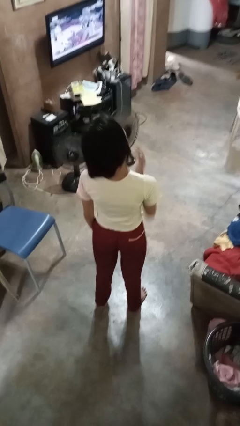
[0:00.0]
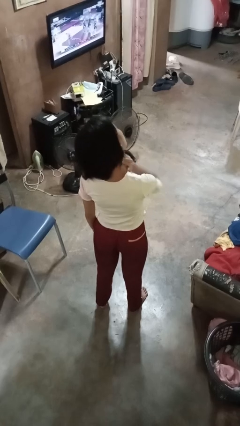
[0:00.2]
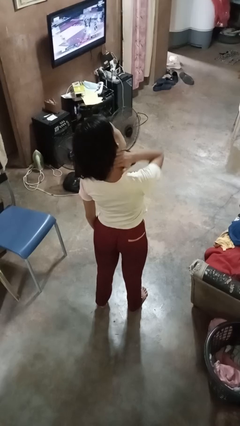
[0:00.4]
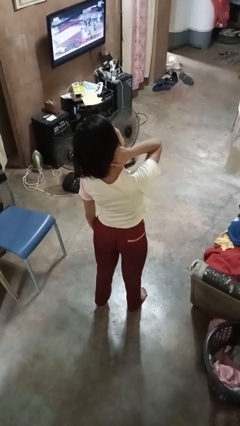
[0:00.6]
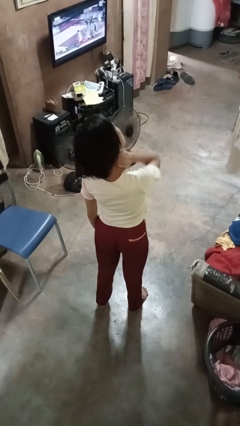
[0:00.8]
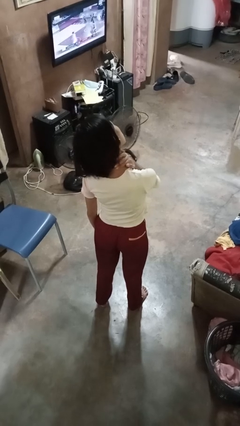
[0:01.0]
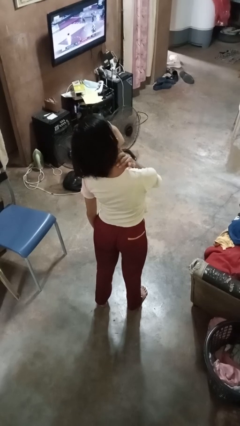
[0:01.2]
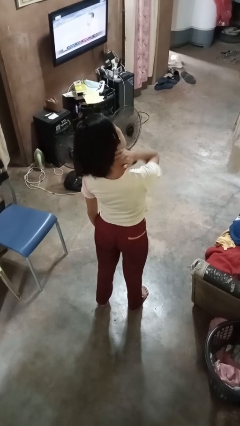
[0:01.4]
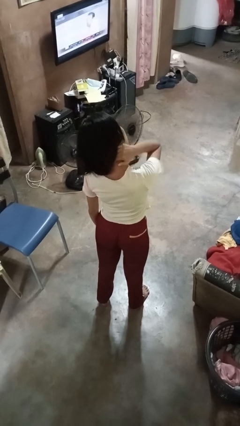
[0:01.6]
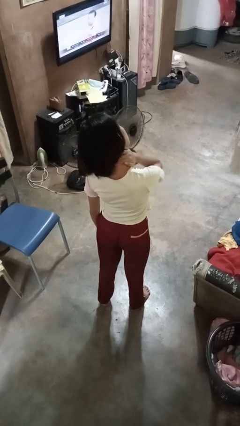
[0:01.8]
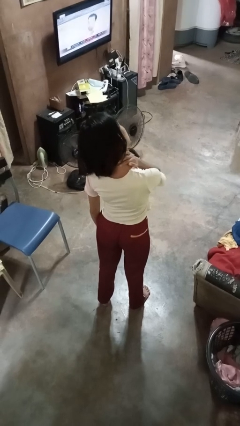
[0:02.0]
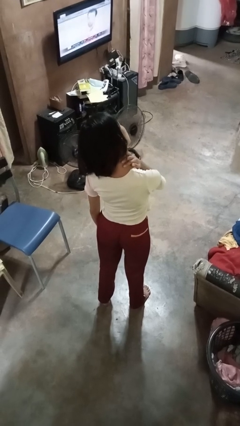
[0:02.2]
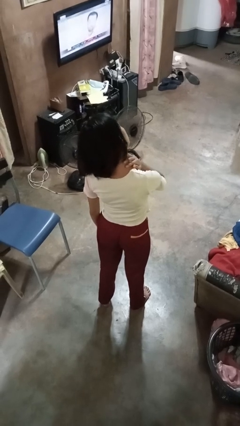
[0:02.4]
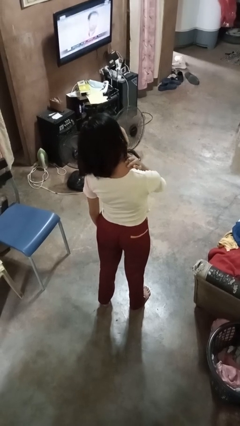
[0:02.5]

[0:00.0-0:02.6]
person rubs neck

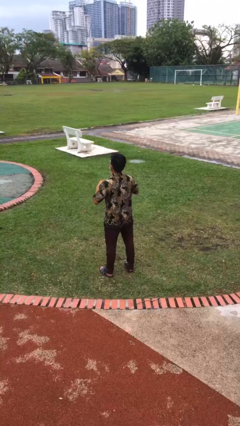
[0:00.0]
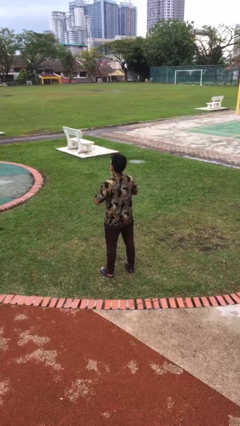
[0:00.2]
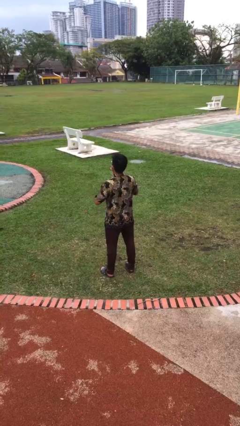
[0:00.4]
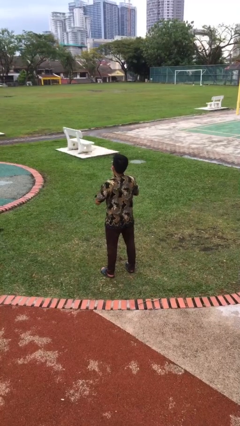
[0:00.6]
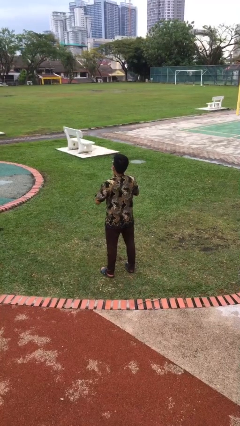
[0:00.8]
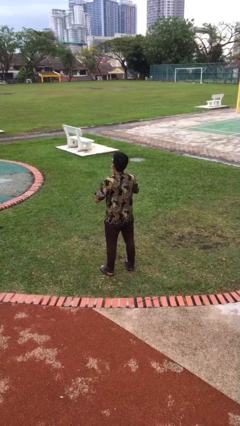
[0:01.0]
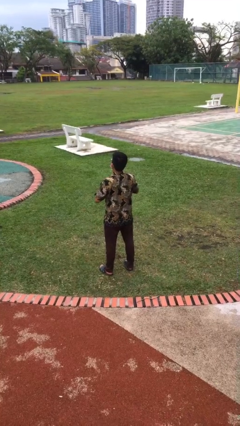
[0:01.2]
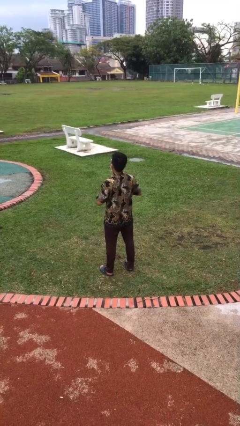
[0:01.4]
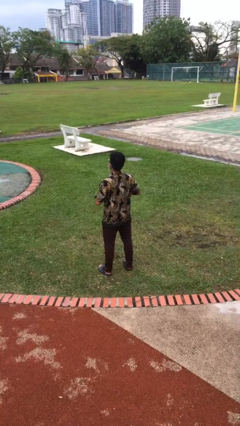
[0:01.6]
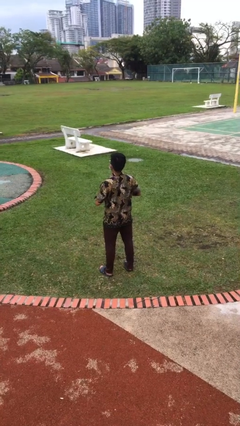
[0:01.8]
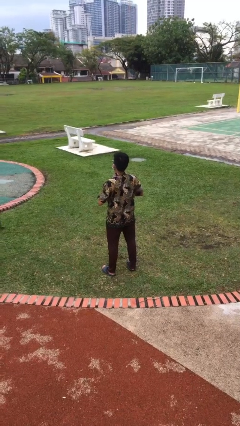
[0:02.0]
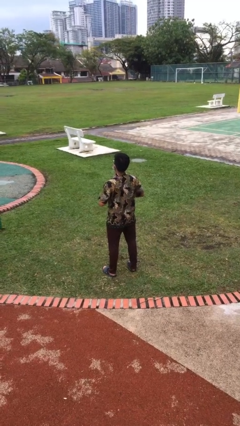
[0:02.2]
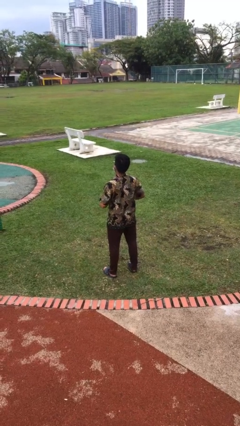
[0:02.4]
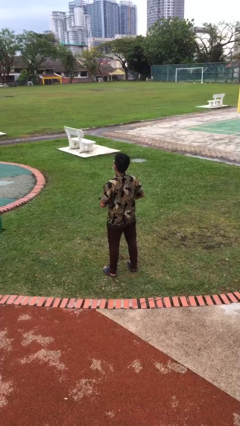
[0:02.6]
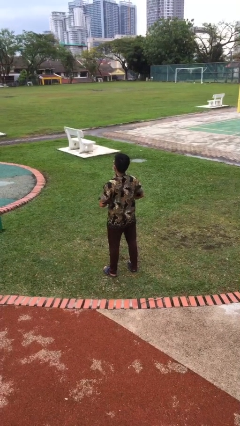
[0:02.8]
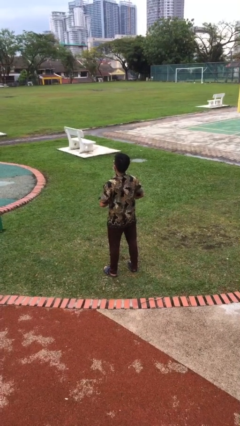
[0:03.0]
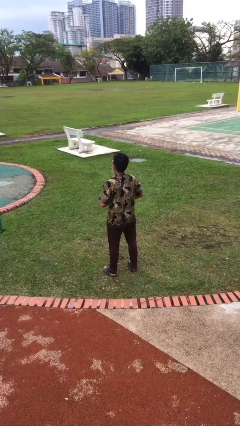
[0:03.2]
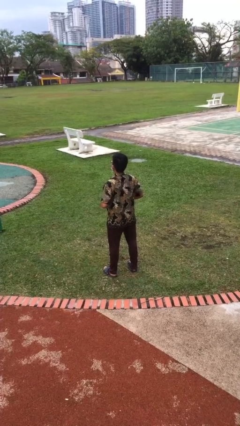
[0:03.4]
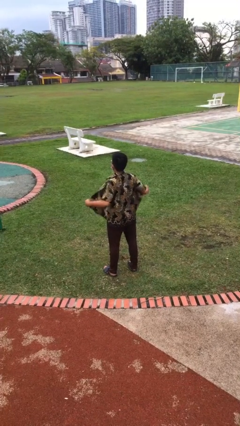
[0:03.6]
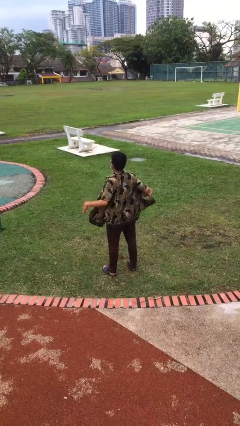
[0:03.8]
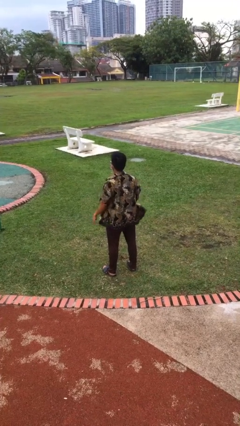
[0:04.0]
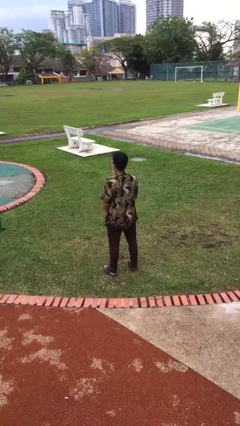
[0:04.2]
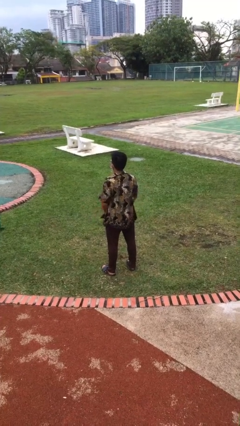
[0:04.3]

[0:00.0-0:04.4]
person unbuttons shirt

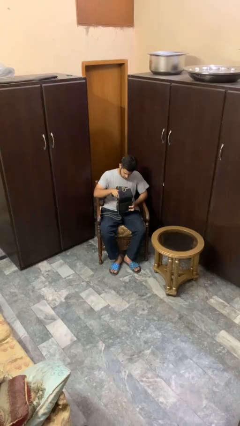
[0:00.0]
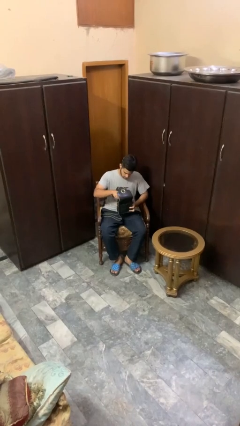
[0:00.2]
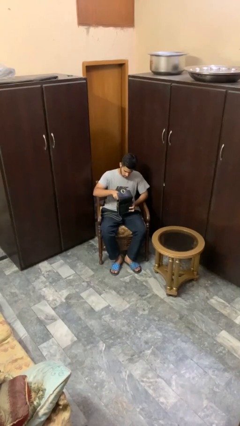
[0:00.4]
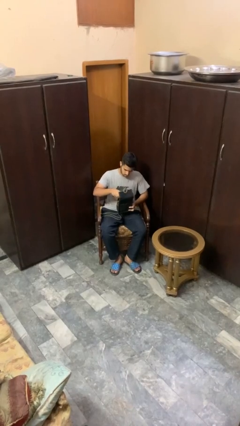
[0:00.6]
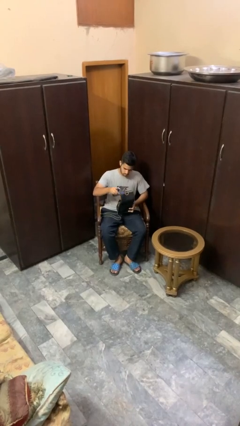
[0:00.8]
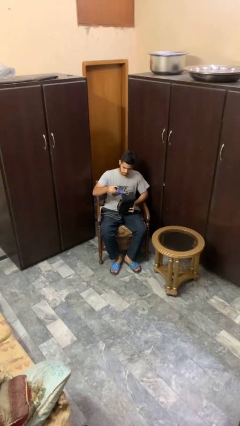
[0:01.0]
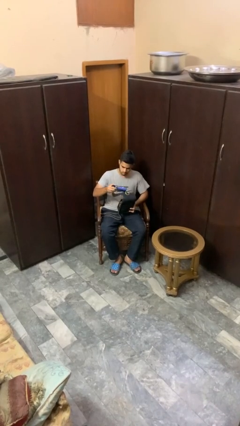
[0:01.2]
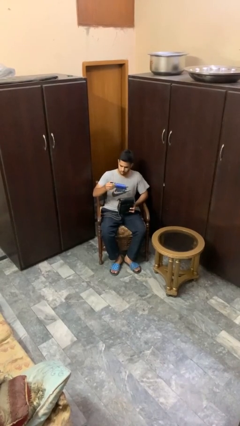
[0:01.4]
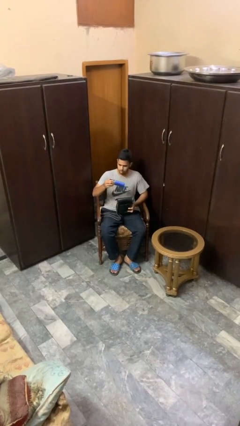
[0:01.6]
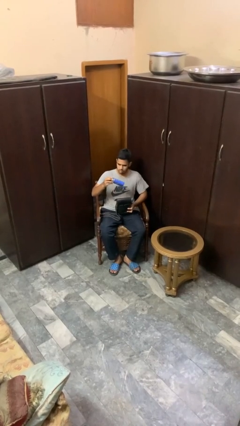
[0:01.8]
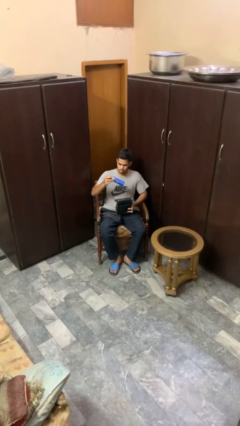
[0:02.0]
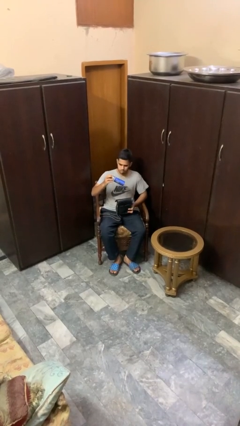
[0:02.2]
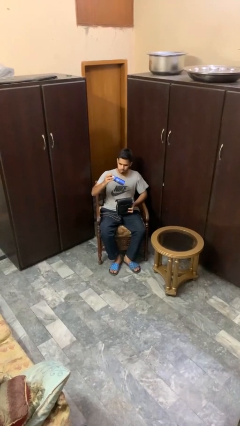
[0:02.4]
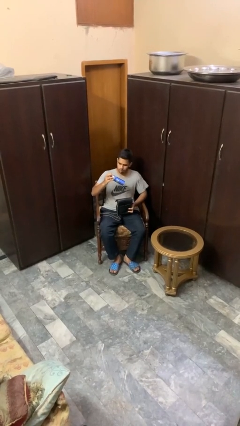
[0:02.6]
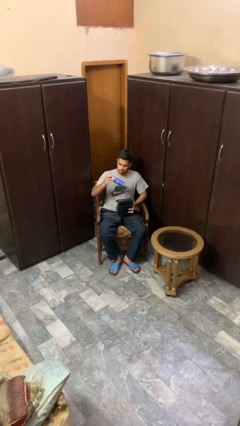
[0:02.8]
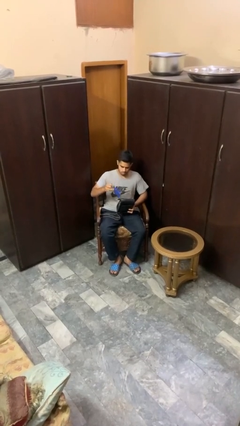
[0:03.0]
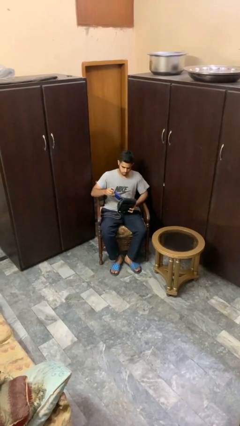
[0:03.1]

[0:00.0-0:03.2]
person takes object from purse

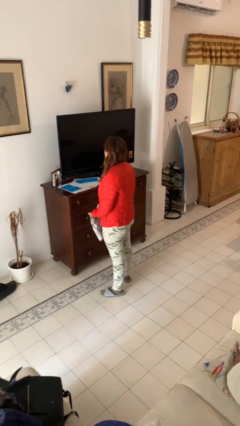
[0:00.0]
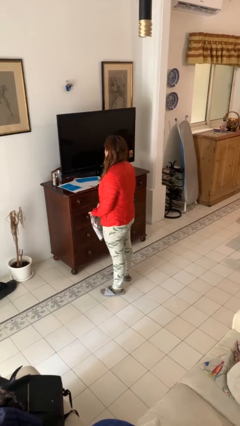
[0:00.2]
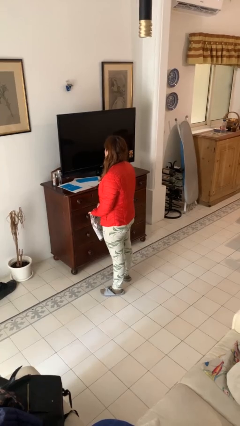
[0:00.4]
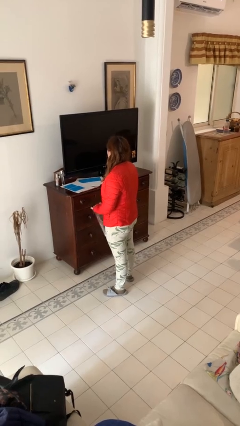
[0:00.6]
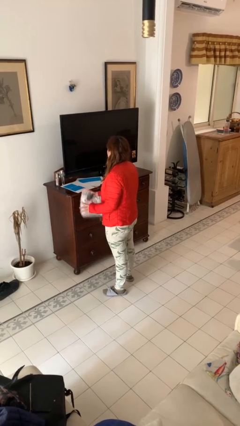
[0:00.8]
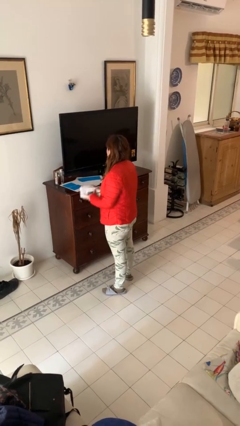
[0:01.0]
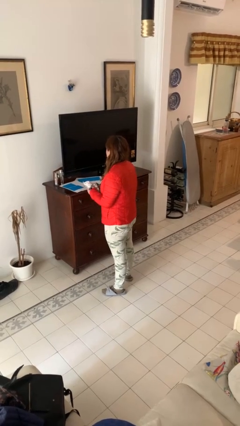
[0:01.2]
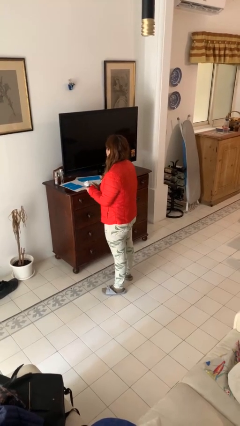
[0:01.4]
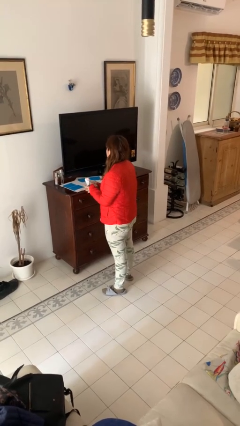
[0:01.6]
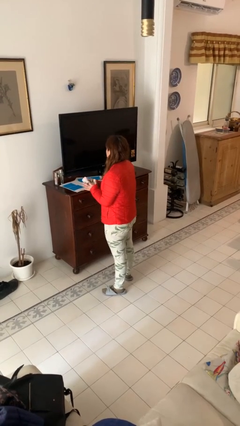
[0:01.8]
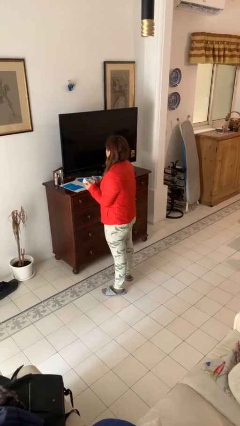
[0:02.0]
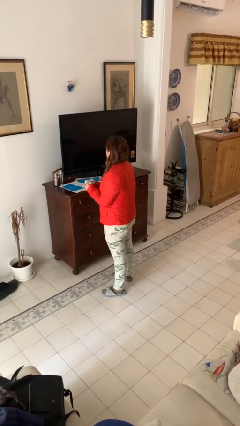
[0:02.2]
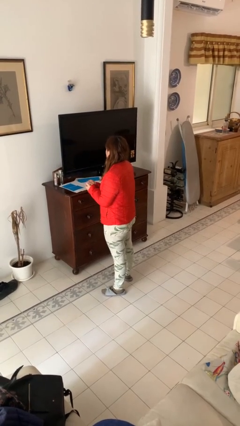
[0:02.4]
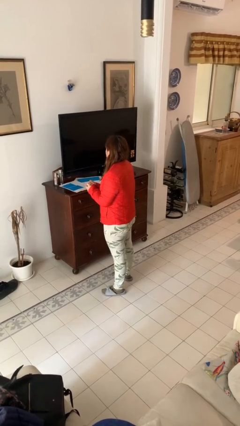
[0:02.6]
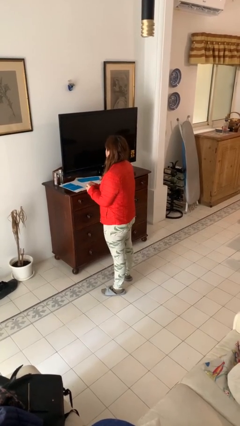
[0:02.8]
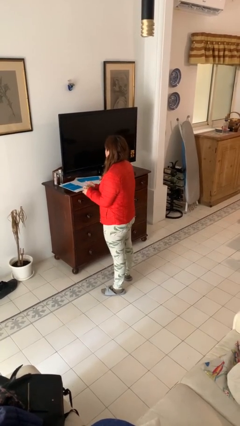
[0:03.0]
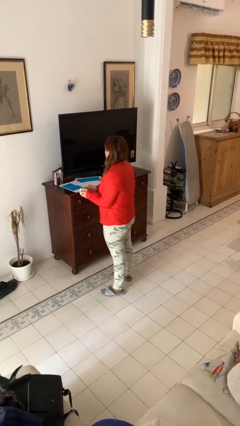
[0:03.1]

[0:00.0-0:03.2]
person crumples paper

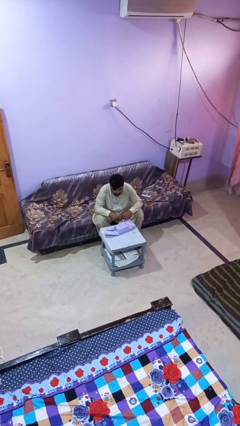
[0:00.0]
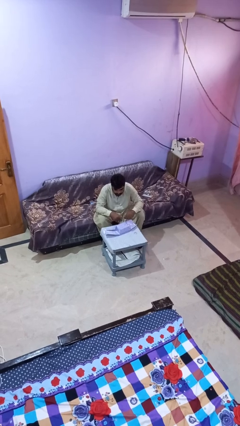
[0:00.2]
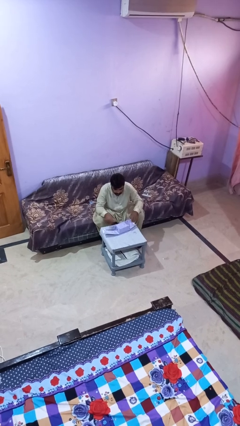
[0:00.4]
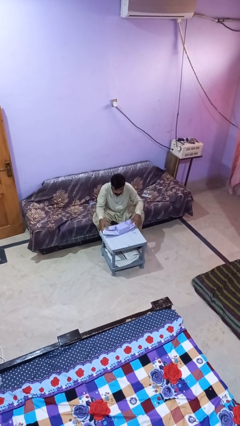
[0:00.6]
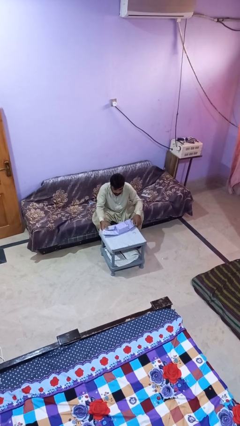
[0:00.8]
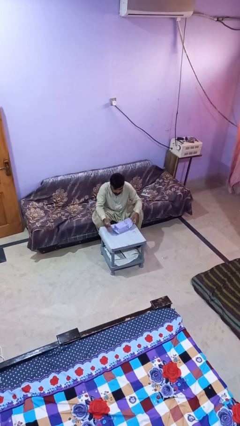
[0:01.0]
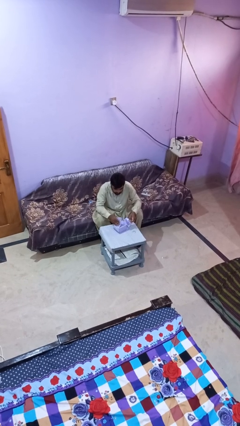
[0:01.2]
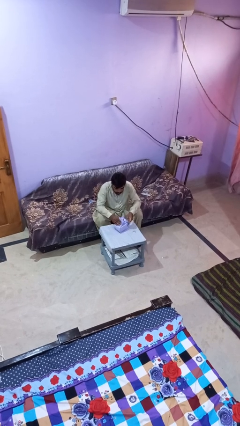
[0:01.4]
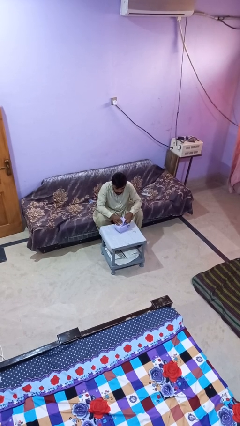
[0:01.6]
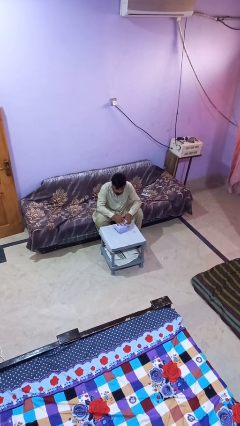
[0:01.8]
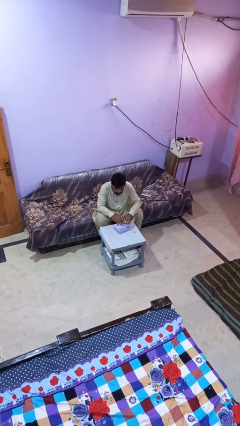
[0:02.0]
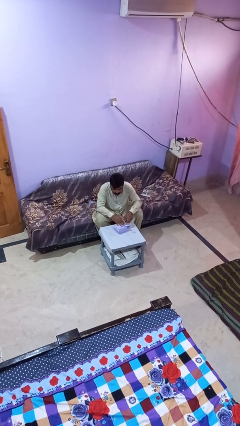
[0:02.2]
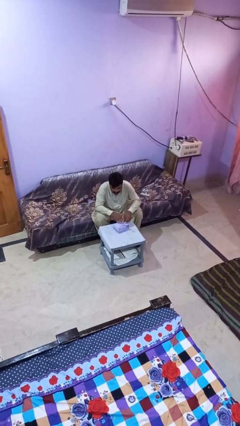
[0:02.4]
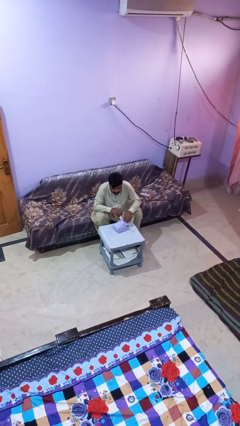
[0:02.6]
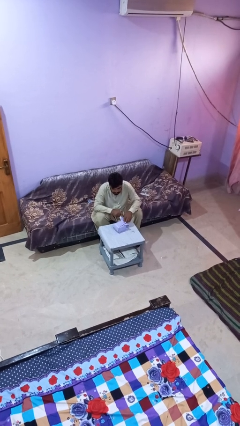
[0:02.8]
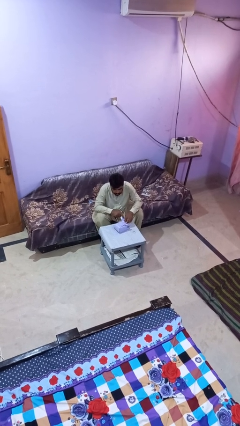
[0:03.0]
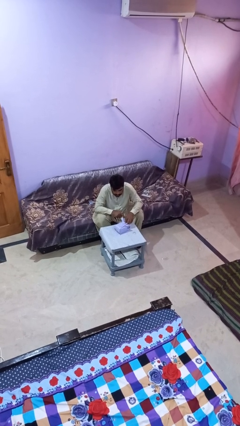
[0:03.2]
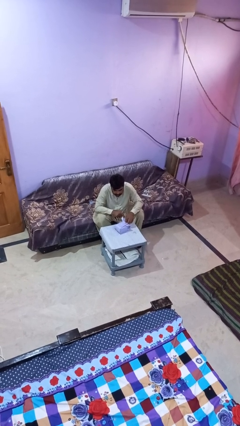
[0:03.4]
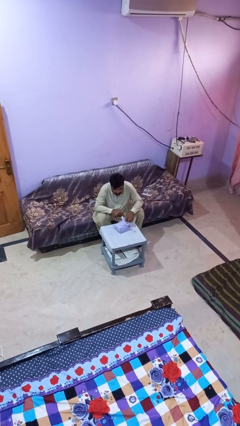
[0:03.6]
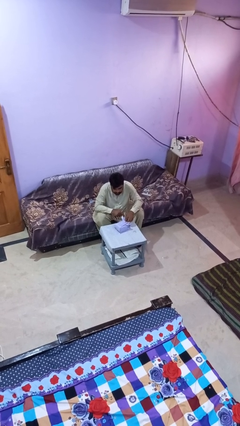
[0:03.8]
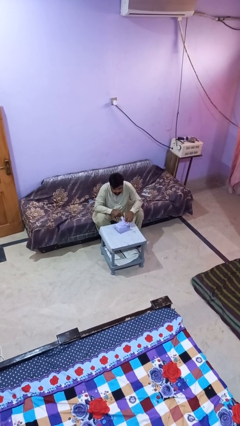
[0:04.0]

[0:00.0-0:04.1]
person wraps box

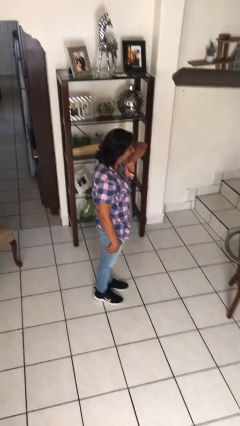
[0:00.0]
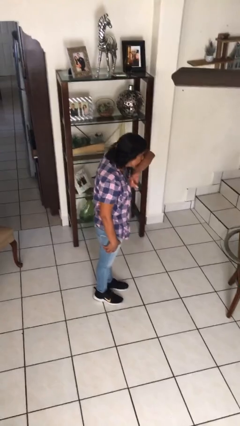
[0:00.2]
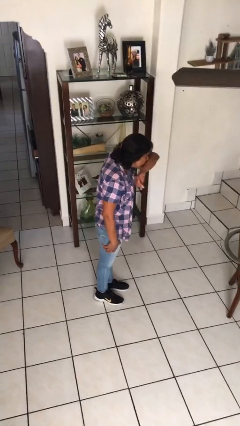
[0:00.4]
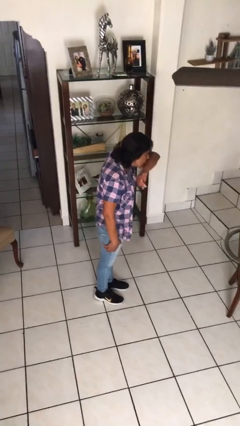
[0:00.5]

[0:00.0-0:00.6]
person sneezes into arm
